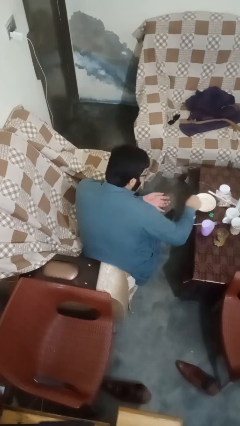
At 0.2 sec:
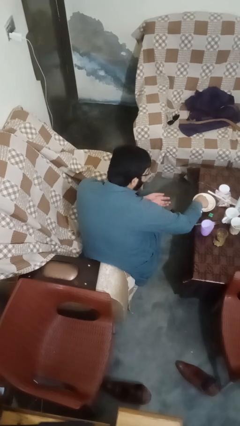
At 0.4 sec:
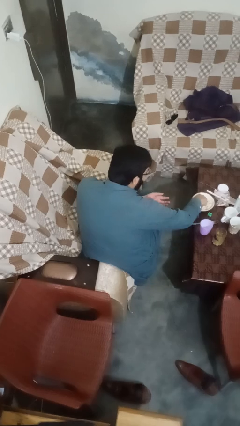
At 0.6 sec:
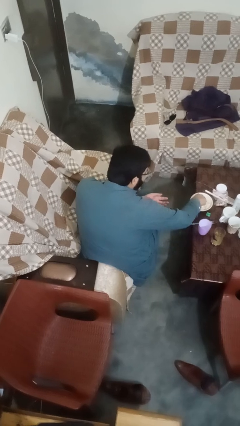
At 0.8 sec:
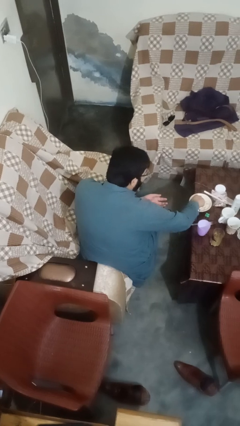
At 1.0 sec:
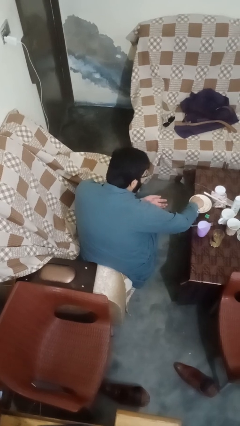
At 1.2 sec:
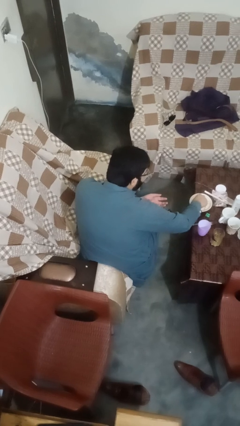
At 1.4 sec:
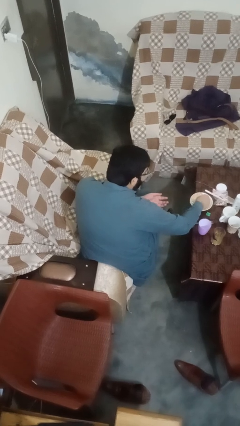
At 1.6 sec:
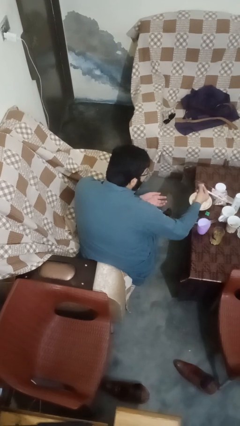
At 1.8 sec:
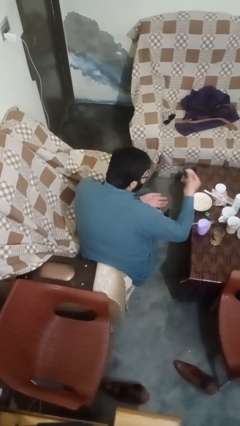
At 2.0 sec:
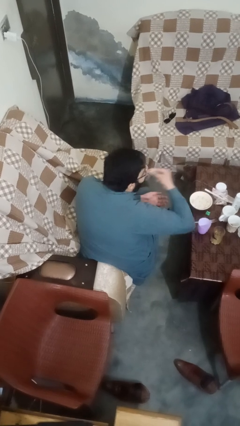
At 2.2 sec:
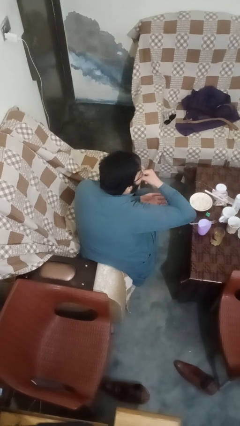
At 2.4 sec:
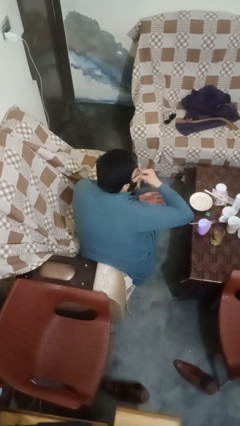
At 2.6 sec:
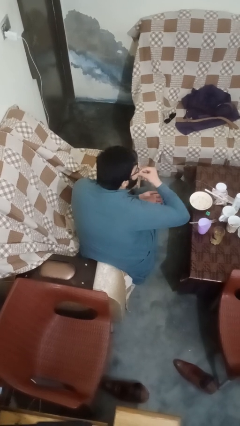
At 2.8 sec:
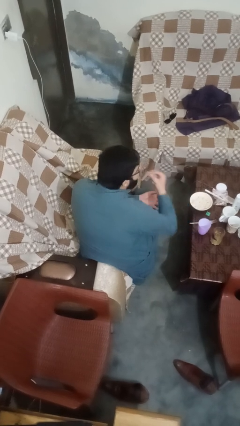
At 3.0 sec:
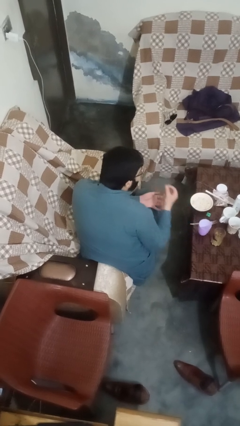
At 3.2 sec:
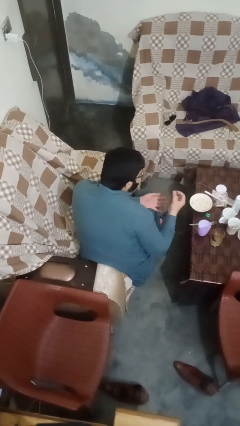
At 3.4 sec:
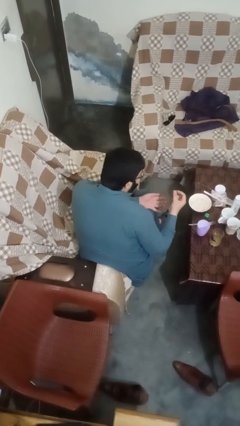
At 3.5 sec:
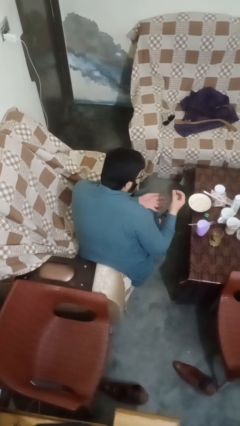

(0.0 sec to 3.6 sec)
person eats with hands

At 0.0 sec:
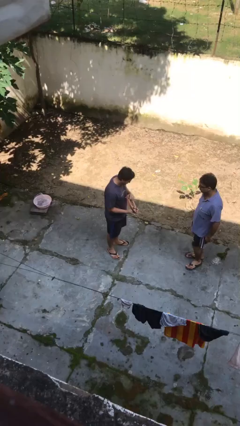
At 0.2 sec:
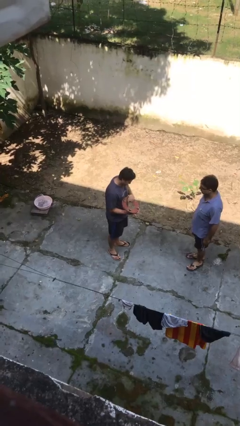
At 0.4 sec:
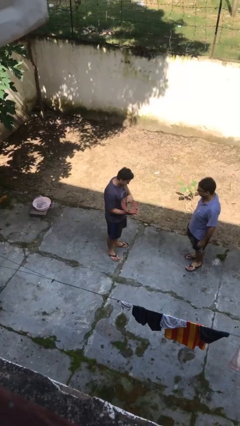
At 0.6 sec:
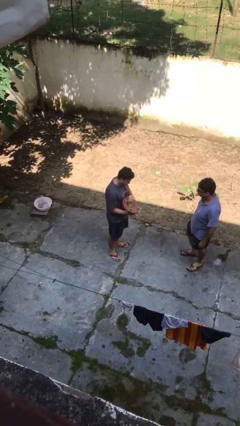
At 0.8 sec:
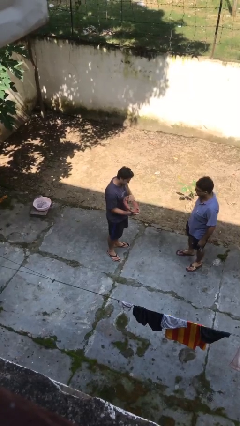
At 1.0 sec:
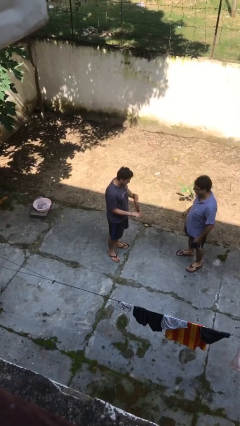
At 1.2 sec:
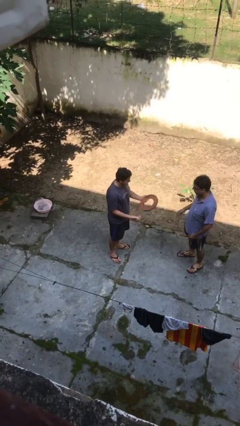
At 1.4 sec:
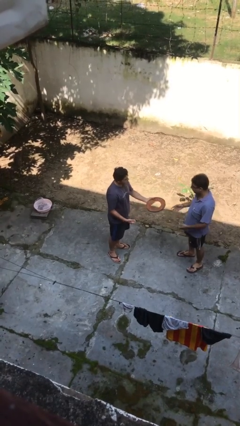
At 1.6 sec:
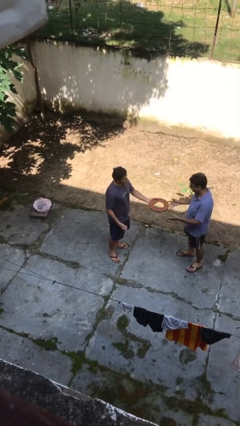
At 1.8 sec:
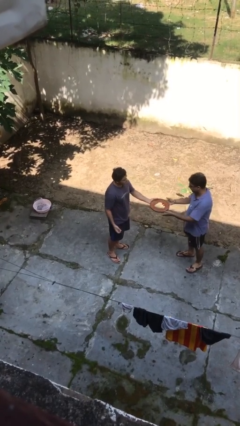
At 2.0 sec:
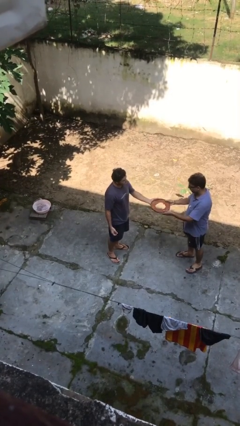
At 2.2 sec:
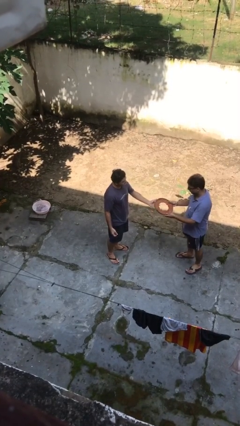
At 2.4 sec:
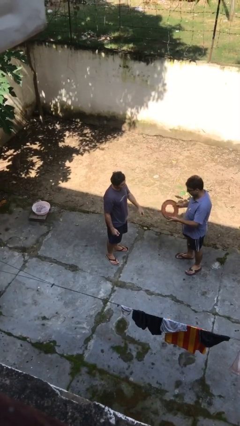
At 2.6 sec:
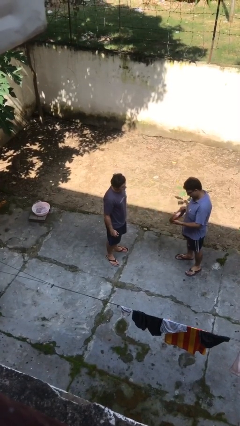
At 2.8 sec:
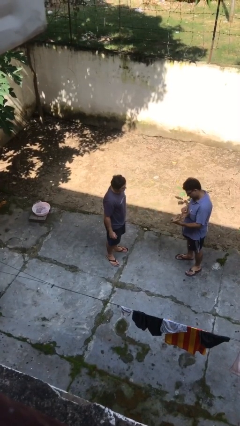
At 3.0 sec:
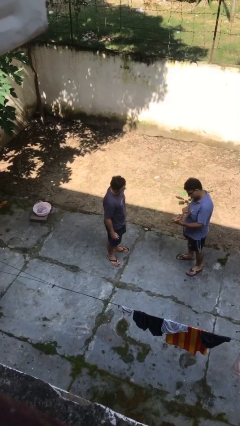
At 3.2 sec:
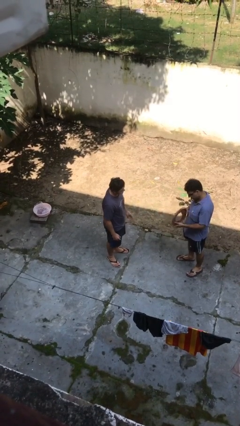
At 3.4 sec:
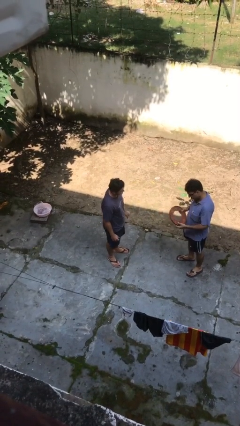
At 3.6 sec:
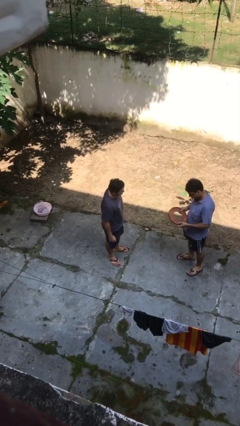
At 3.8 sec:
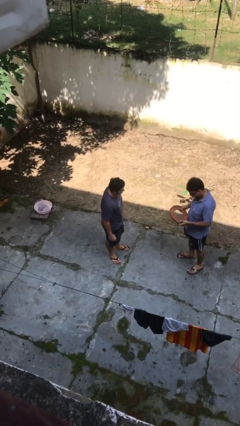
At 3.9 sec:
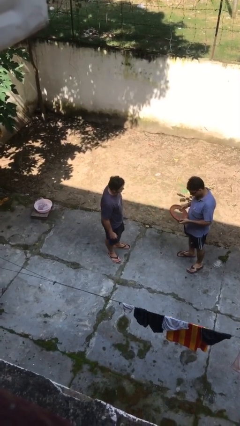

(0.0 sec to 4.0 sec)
person transfers object to person

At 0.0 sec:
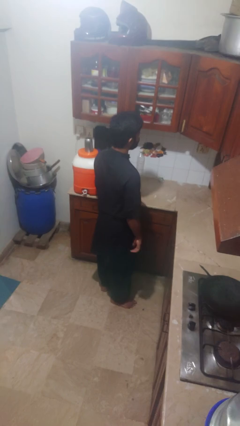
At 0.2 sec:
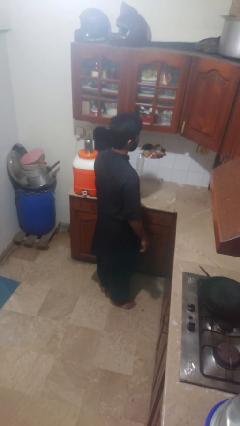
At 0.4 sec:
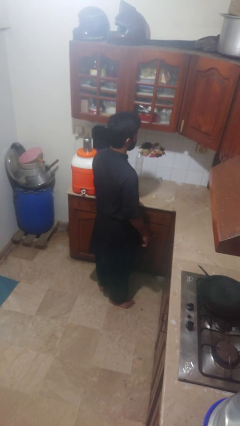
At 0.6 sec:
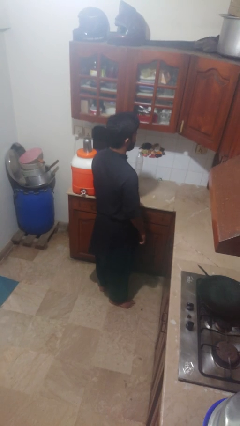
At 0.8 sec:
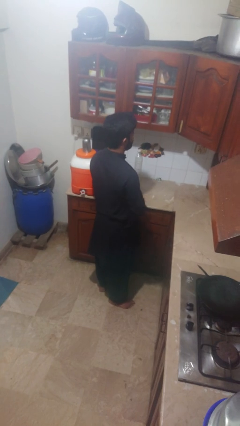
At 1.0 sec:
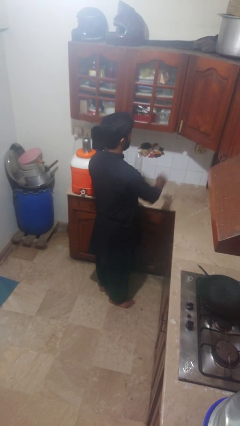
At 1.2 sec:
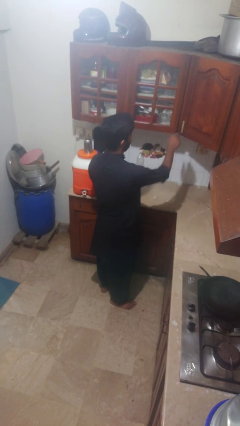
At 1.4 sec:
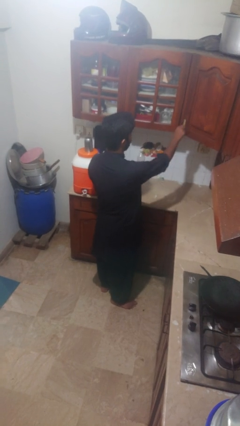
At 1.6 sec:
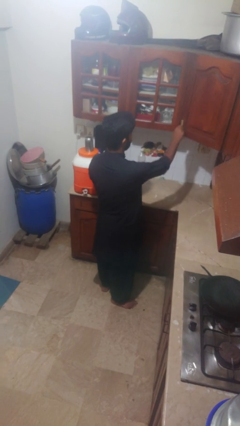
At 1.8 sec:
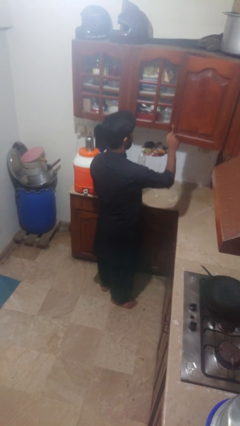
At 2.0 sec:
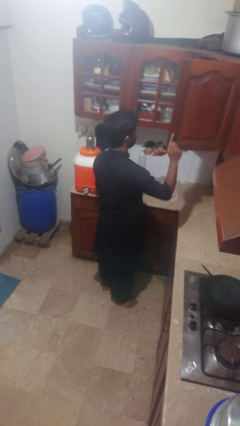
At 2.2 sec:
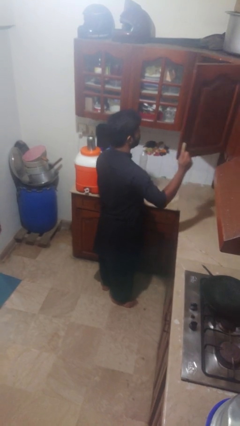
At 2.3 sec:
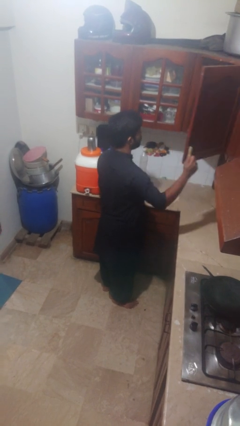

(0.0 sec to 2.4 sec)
person opens cabinet

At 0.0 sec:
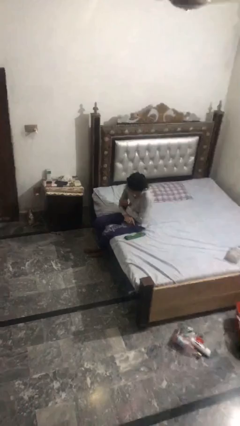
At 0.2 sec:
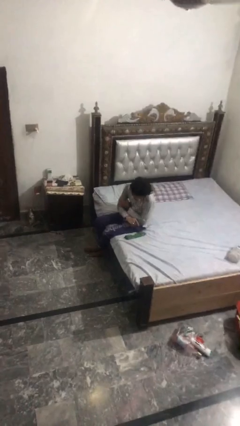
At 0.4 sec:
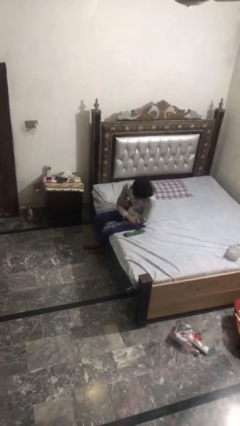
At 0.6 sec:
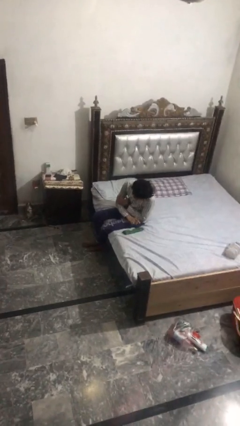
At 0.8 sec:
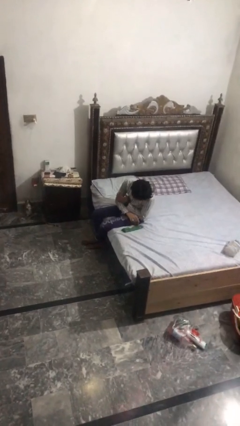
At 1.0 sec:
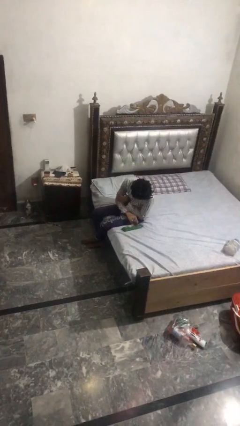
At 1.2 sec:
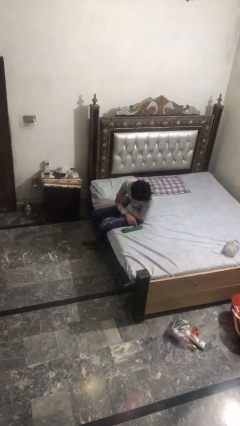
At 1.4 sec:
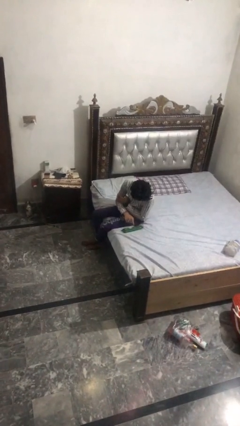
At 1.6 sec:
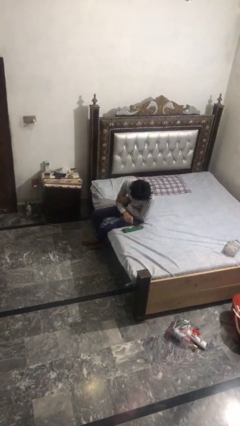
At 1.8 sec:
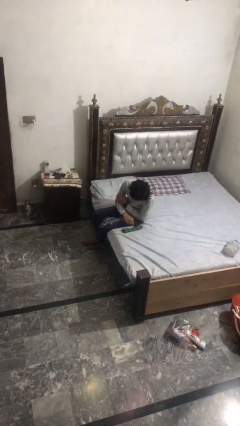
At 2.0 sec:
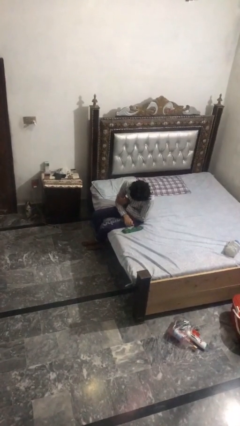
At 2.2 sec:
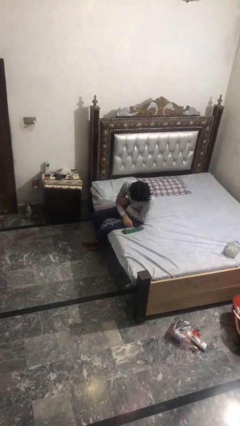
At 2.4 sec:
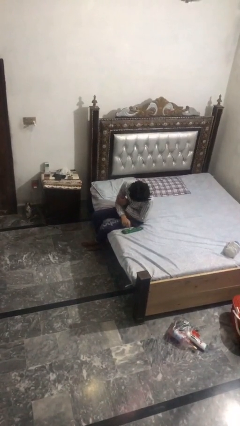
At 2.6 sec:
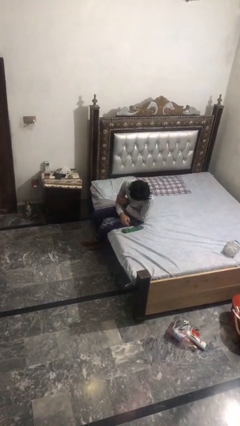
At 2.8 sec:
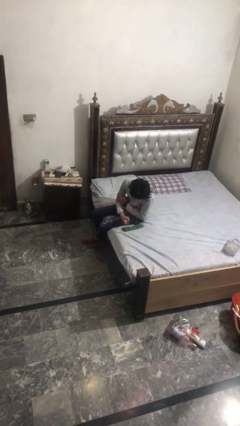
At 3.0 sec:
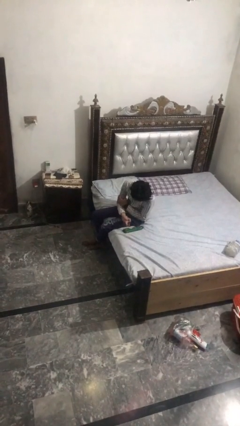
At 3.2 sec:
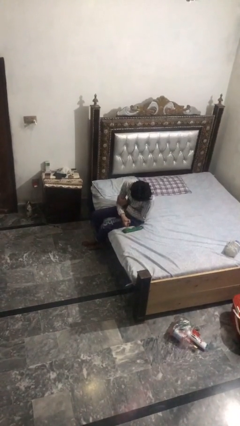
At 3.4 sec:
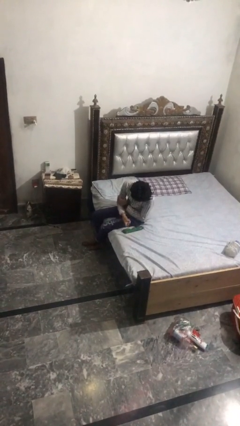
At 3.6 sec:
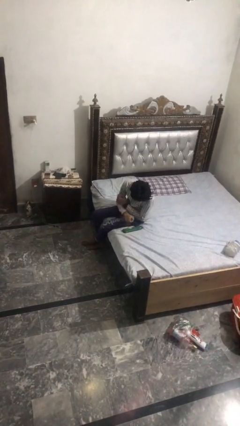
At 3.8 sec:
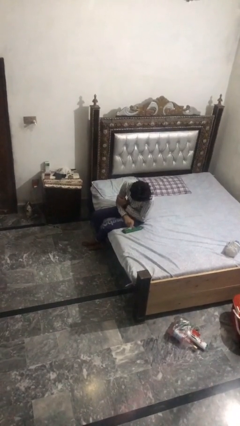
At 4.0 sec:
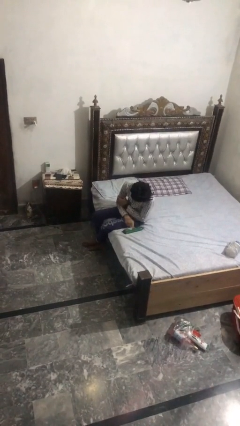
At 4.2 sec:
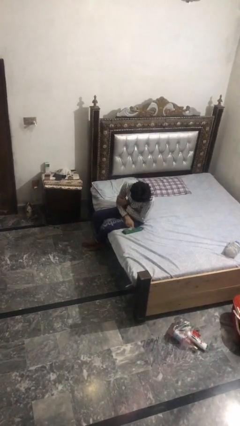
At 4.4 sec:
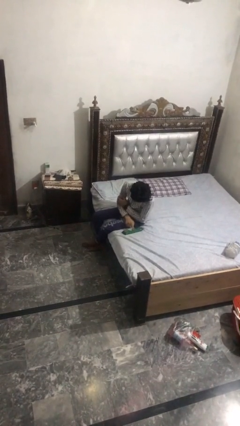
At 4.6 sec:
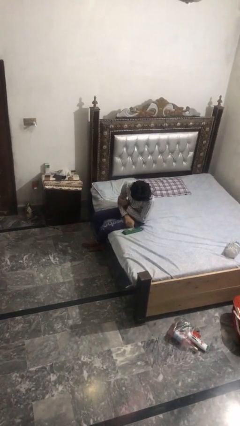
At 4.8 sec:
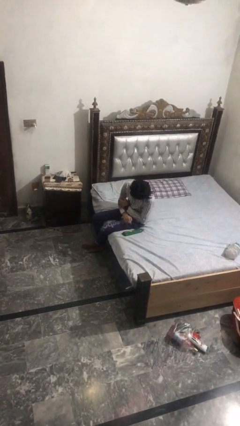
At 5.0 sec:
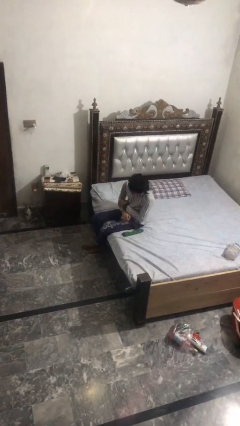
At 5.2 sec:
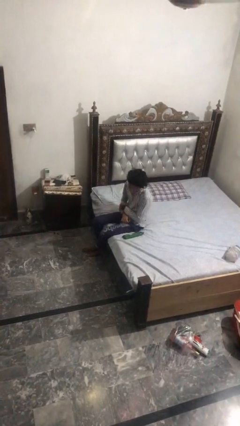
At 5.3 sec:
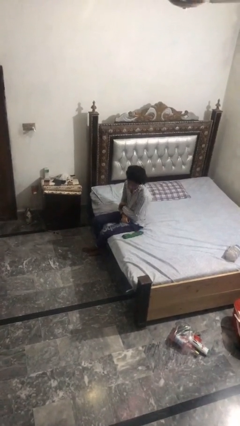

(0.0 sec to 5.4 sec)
person taps object with finger

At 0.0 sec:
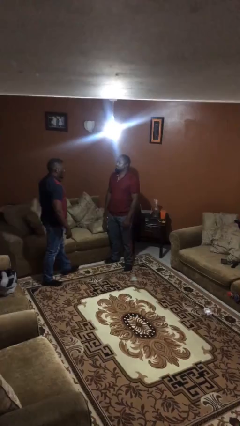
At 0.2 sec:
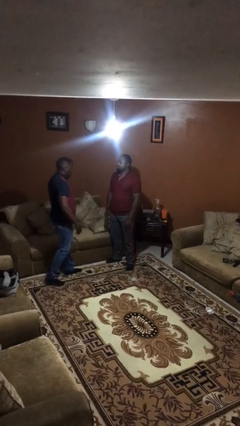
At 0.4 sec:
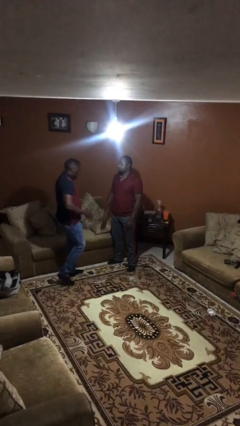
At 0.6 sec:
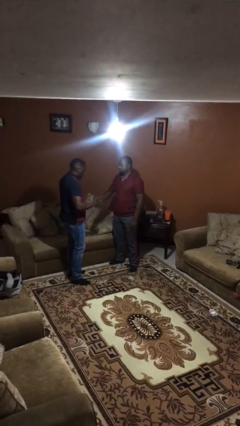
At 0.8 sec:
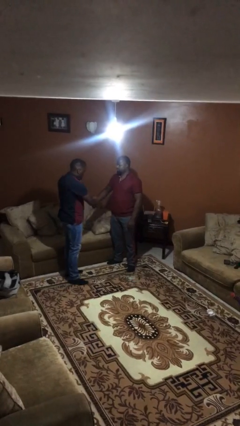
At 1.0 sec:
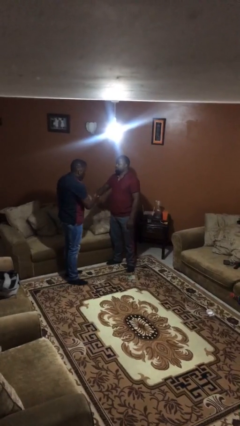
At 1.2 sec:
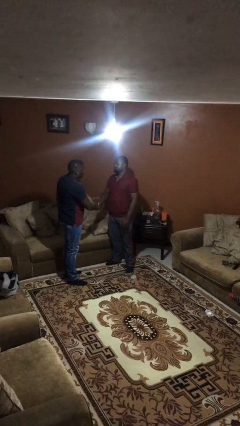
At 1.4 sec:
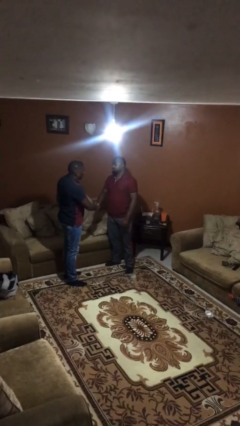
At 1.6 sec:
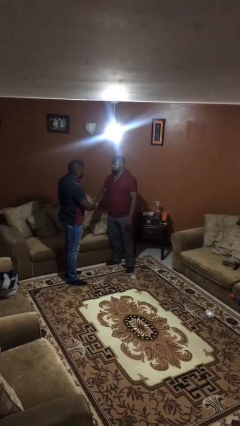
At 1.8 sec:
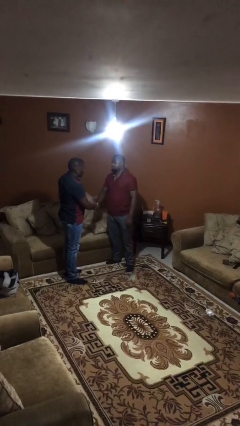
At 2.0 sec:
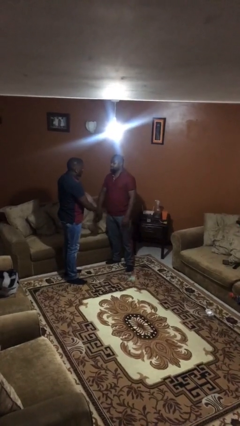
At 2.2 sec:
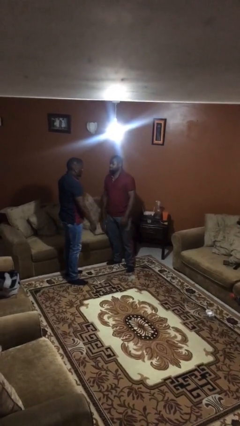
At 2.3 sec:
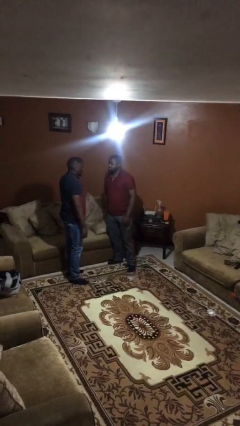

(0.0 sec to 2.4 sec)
person shakes hand
